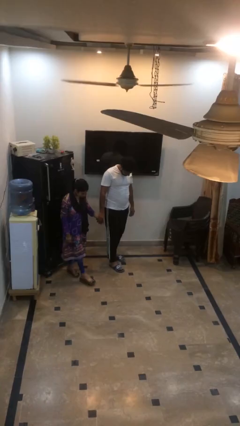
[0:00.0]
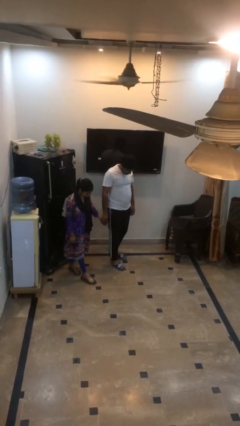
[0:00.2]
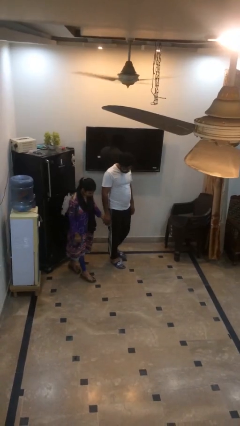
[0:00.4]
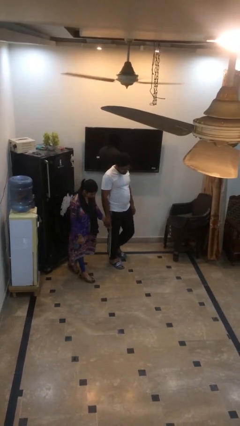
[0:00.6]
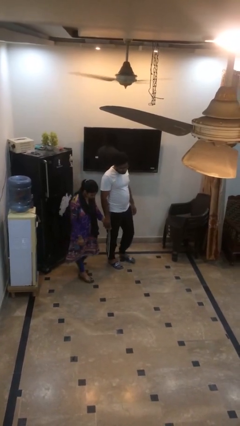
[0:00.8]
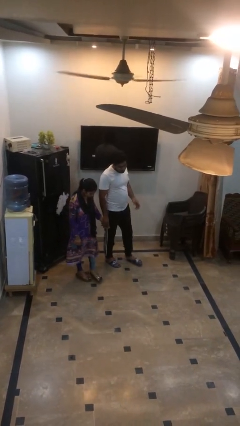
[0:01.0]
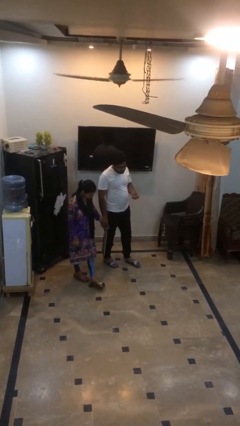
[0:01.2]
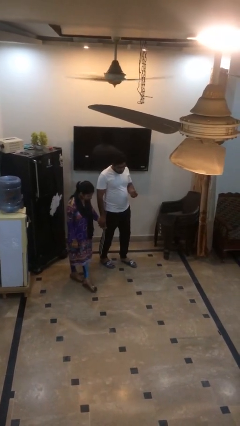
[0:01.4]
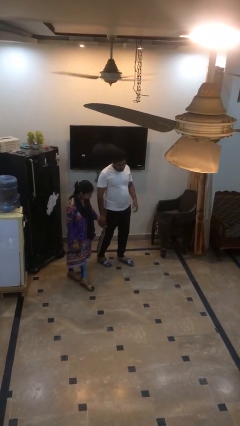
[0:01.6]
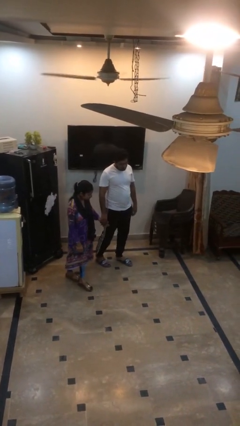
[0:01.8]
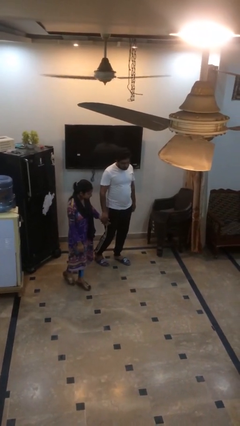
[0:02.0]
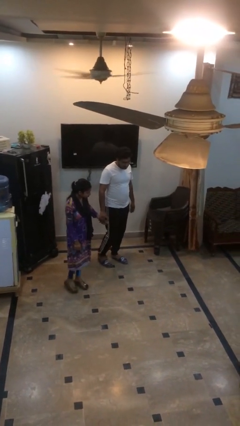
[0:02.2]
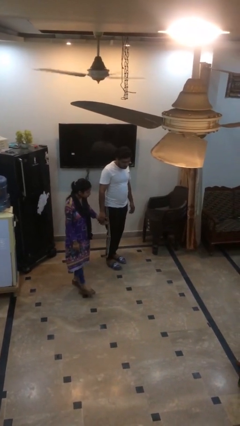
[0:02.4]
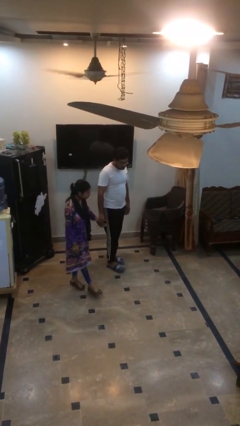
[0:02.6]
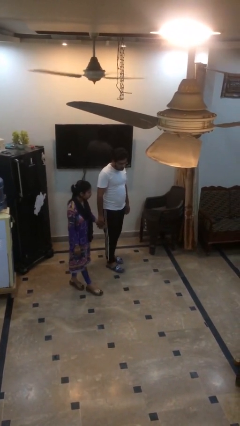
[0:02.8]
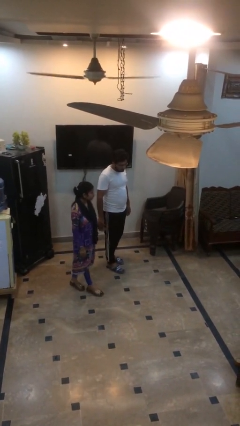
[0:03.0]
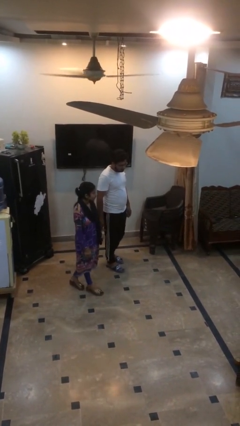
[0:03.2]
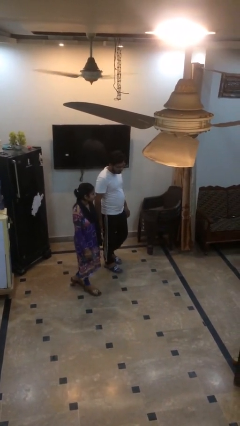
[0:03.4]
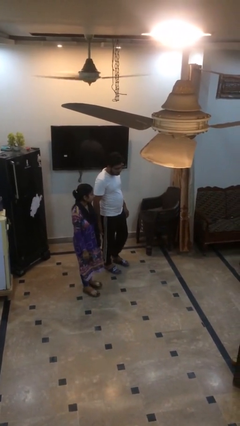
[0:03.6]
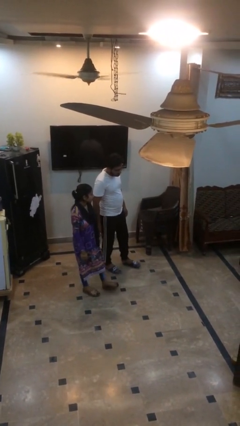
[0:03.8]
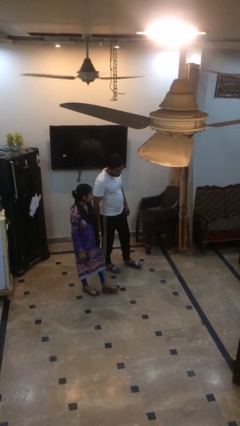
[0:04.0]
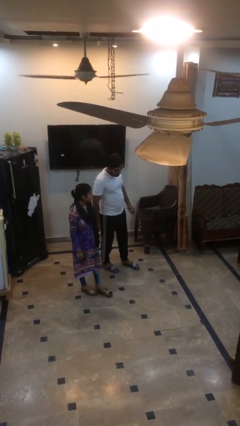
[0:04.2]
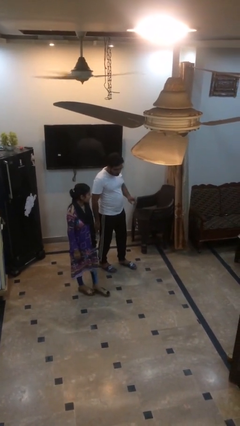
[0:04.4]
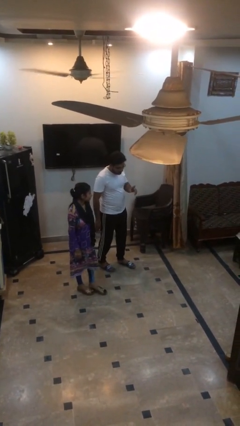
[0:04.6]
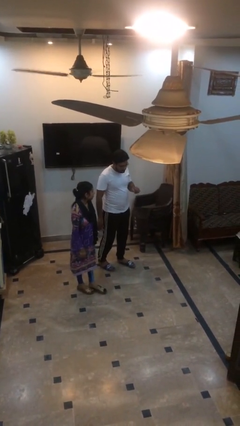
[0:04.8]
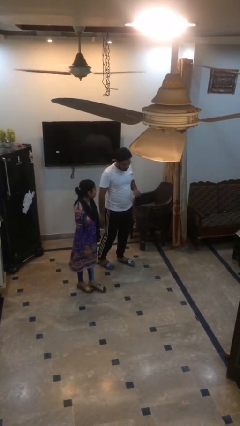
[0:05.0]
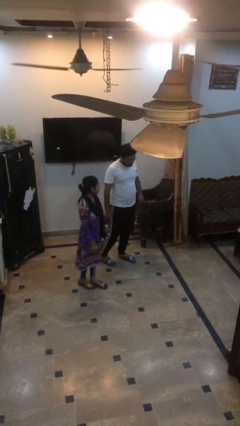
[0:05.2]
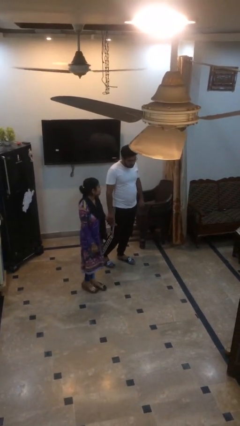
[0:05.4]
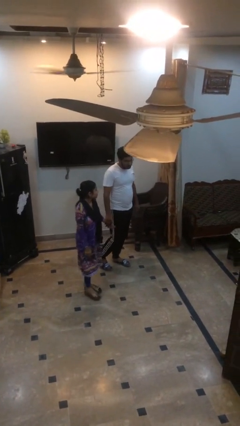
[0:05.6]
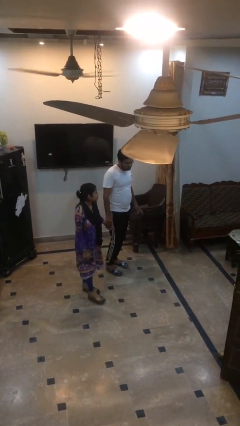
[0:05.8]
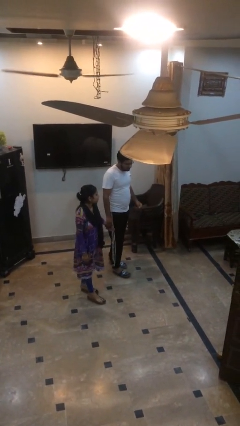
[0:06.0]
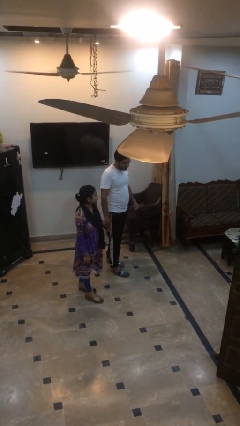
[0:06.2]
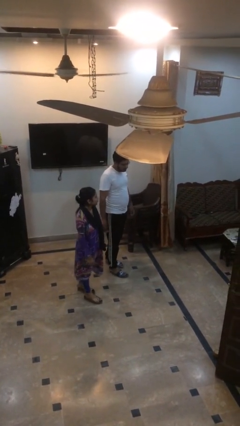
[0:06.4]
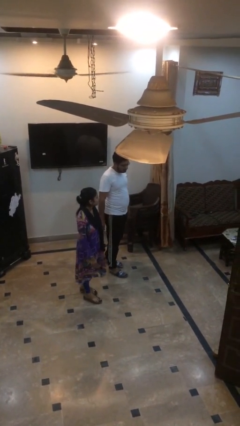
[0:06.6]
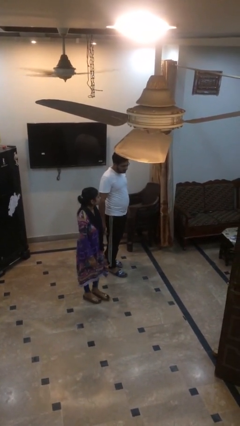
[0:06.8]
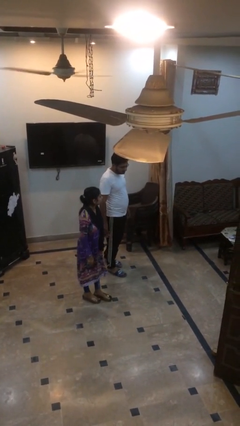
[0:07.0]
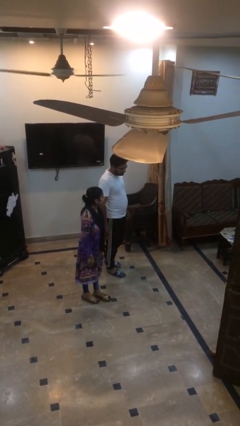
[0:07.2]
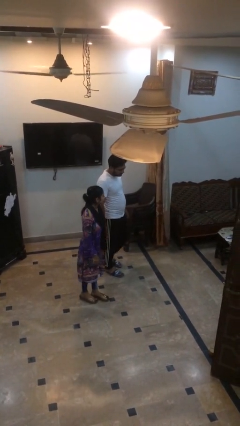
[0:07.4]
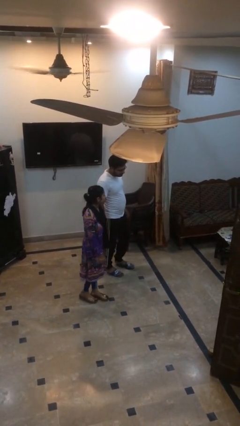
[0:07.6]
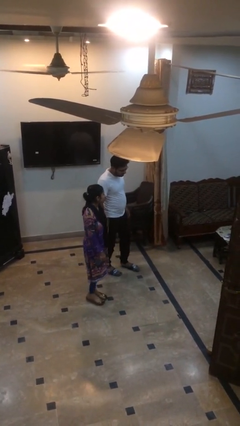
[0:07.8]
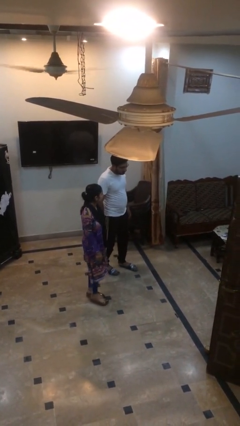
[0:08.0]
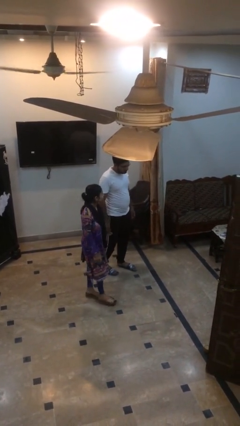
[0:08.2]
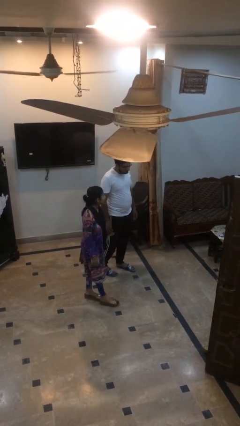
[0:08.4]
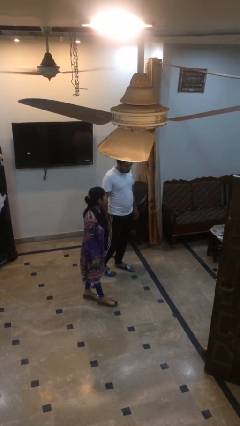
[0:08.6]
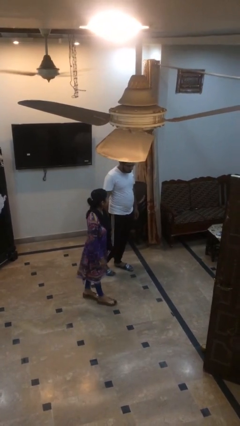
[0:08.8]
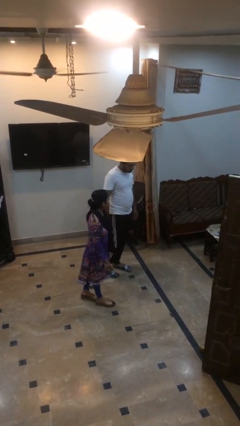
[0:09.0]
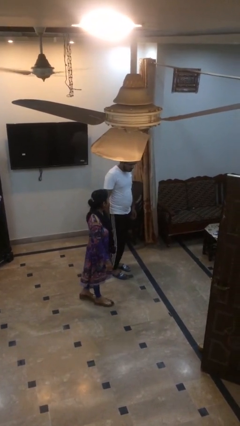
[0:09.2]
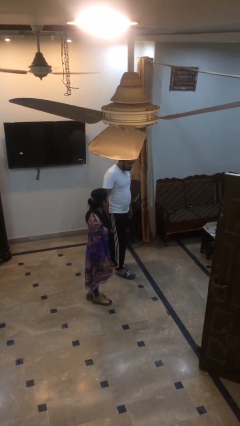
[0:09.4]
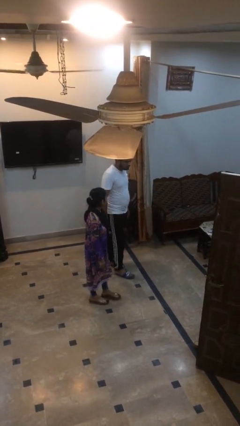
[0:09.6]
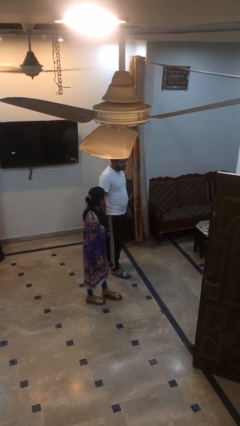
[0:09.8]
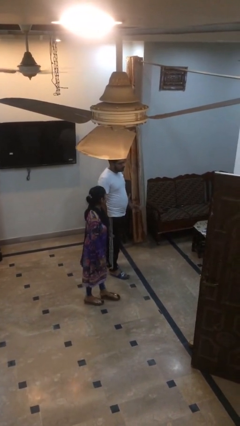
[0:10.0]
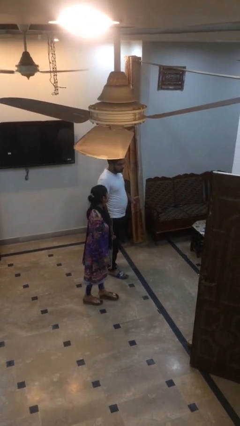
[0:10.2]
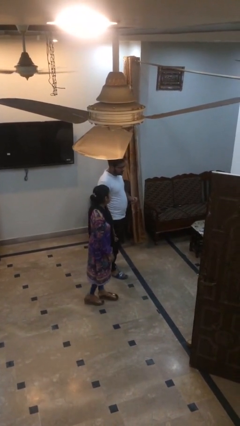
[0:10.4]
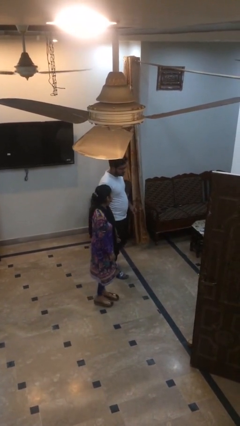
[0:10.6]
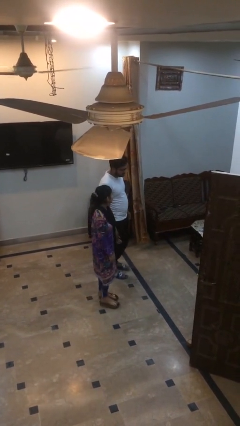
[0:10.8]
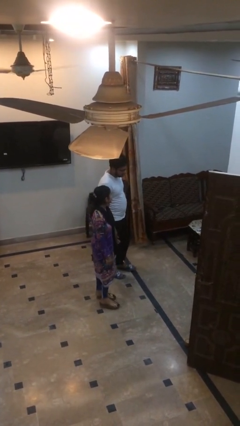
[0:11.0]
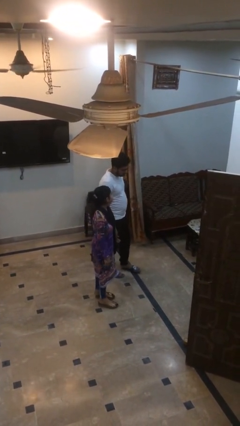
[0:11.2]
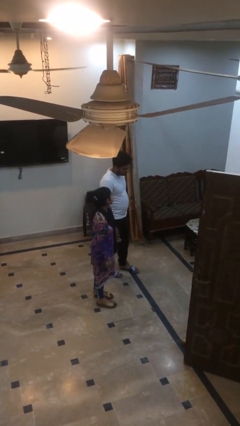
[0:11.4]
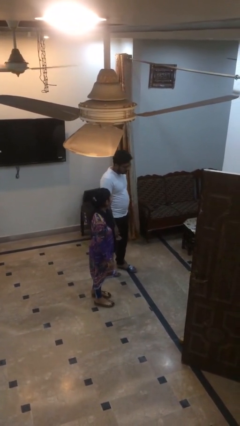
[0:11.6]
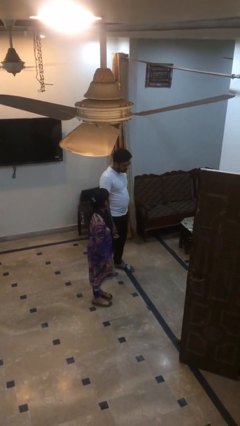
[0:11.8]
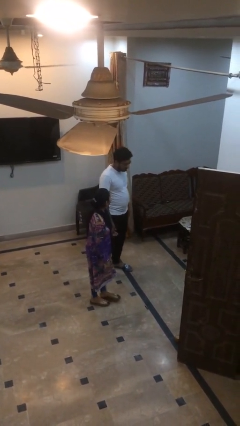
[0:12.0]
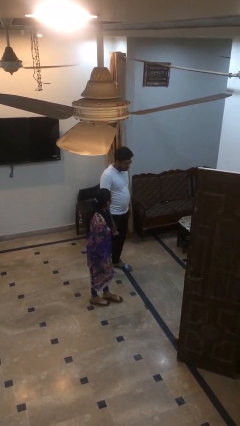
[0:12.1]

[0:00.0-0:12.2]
person holds hand

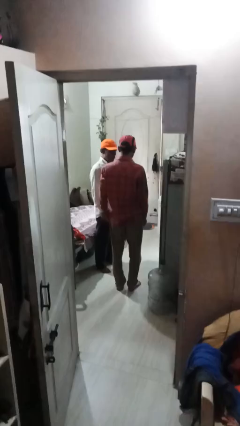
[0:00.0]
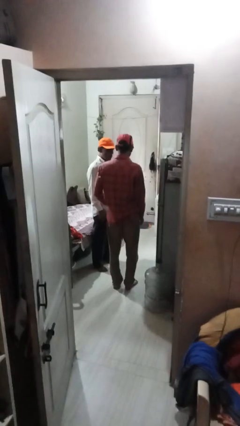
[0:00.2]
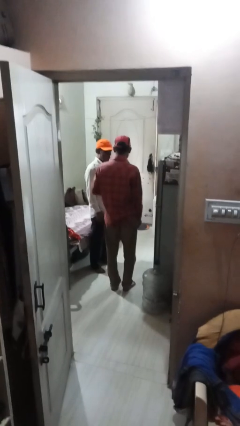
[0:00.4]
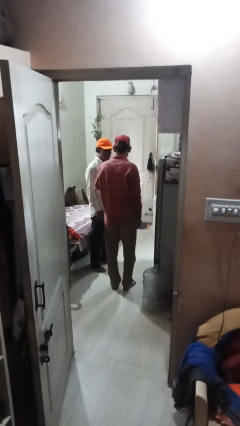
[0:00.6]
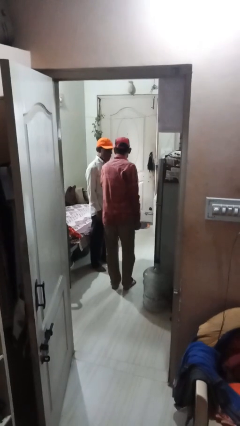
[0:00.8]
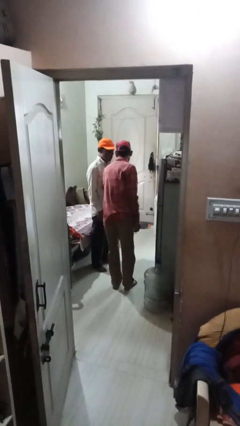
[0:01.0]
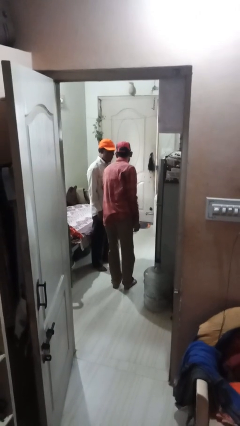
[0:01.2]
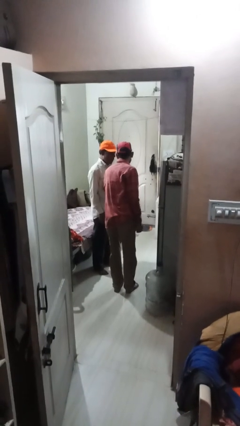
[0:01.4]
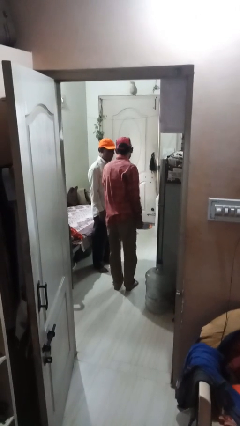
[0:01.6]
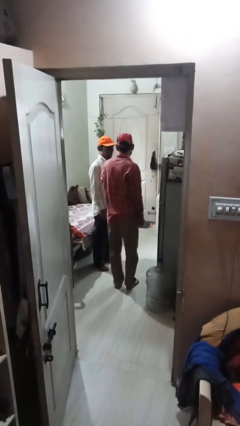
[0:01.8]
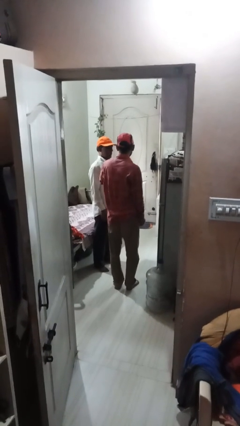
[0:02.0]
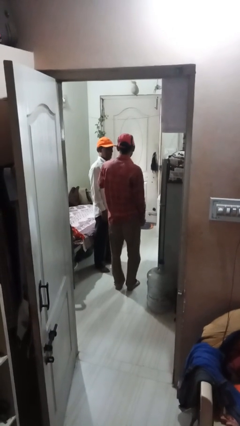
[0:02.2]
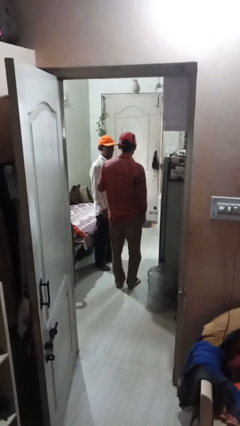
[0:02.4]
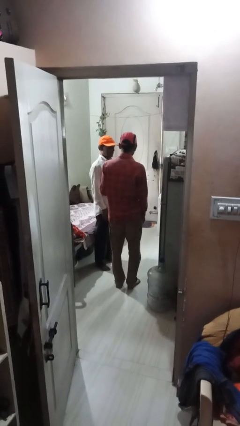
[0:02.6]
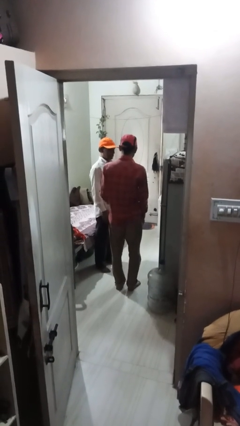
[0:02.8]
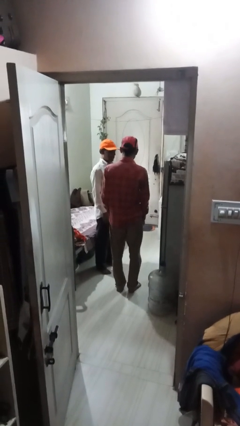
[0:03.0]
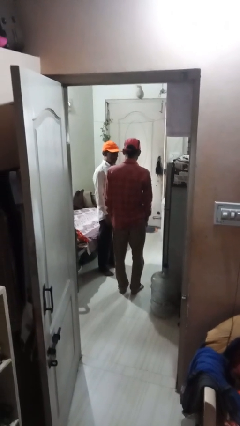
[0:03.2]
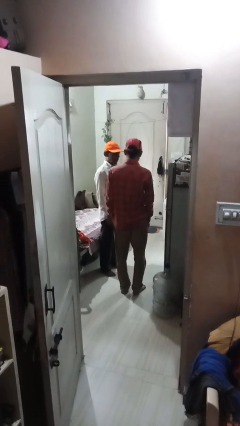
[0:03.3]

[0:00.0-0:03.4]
person nudges person with elbow

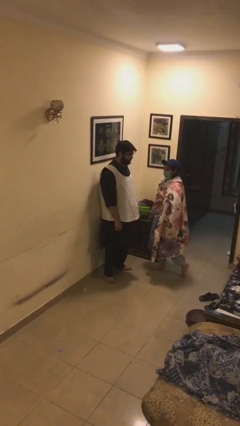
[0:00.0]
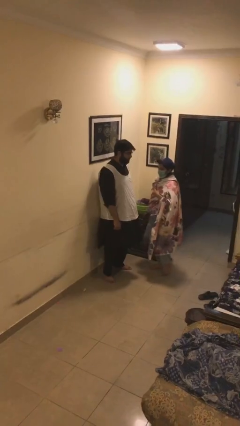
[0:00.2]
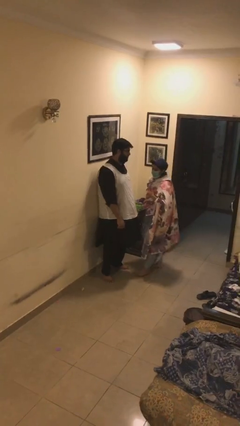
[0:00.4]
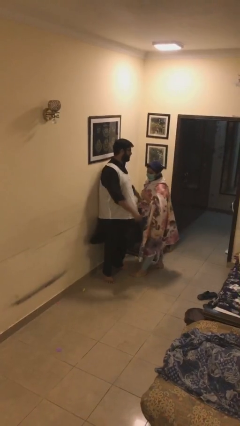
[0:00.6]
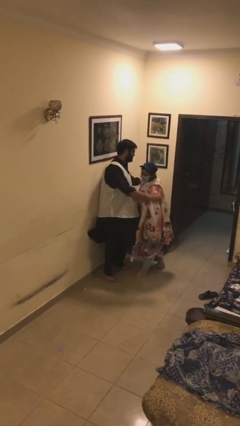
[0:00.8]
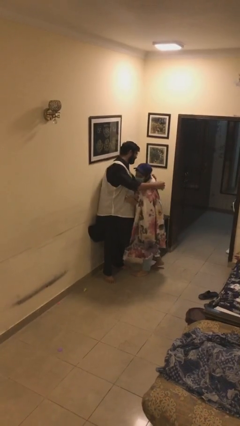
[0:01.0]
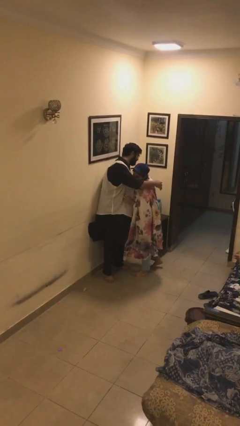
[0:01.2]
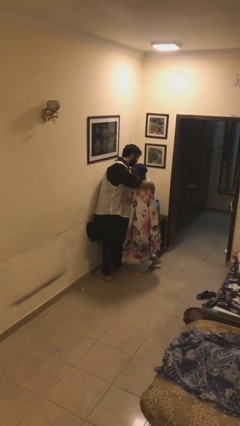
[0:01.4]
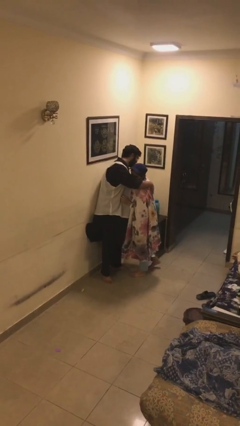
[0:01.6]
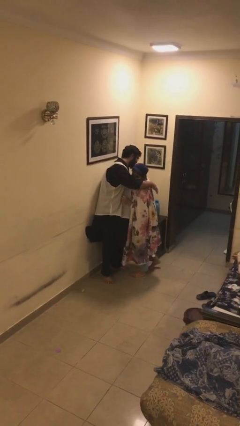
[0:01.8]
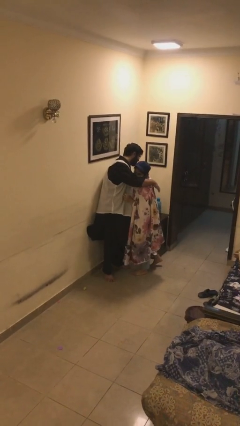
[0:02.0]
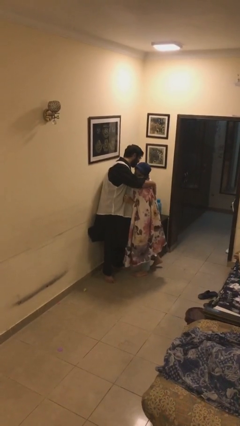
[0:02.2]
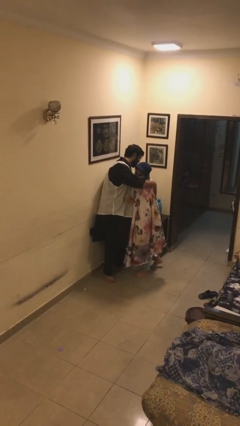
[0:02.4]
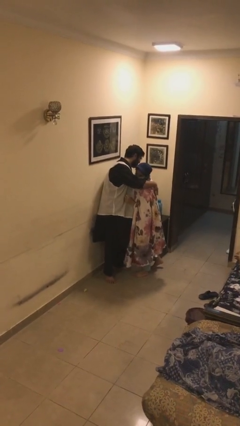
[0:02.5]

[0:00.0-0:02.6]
person embraces person
